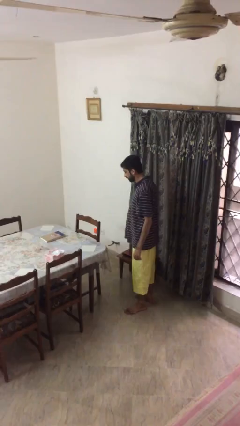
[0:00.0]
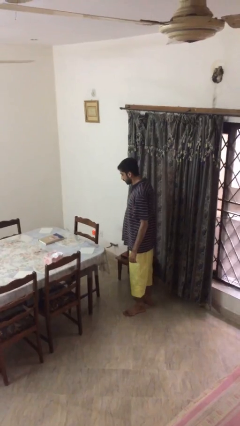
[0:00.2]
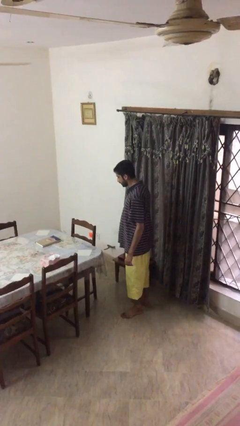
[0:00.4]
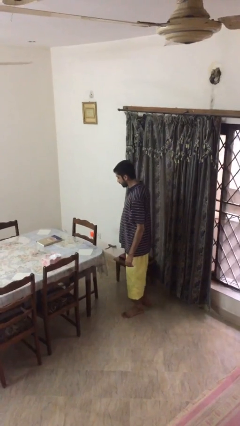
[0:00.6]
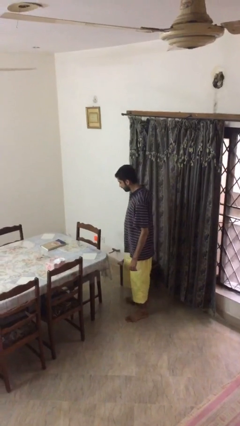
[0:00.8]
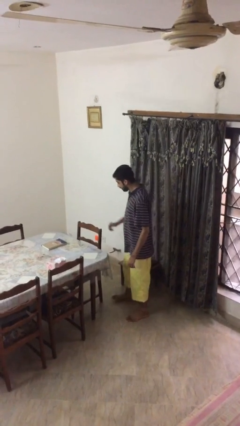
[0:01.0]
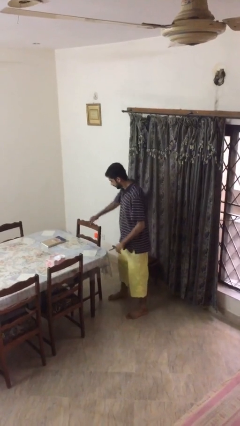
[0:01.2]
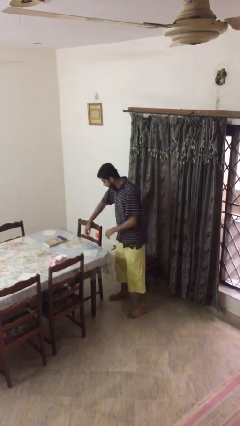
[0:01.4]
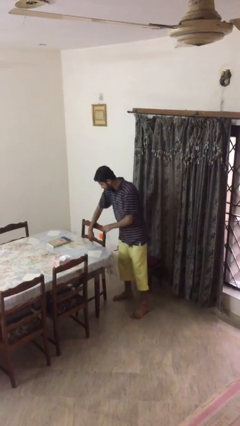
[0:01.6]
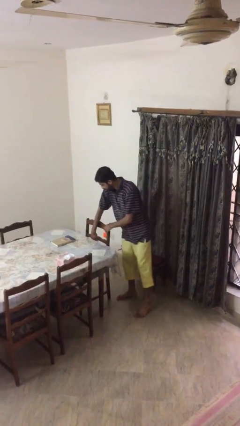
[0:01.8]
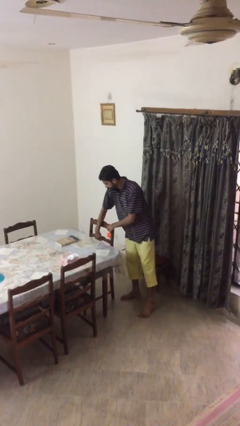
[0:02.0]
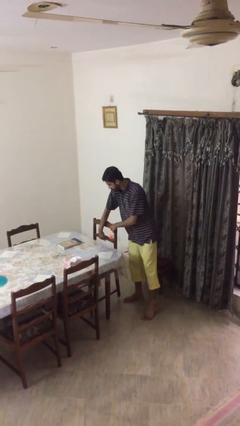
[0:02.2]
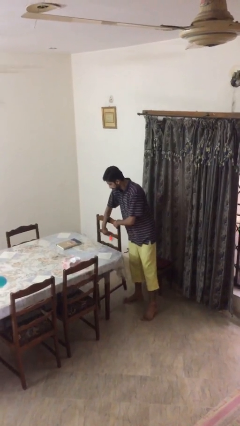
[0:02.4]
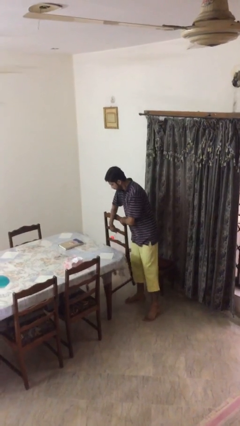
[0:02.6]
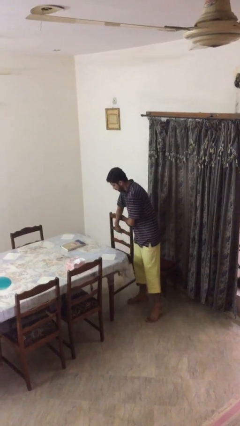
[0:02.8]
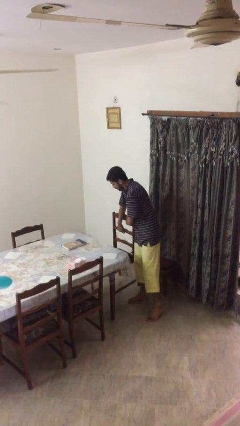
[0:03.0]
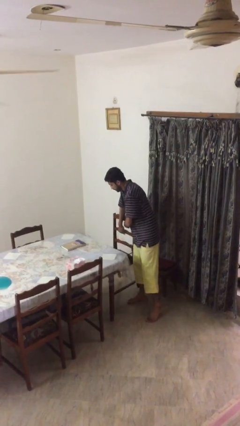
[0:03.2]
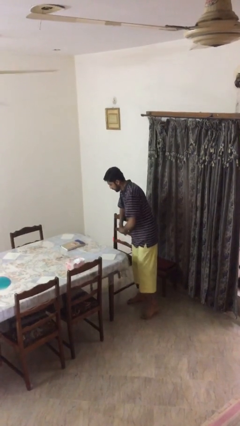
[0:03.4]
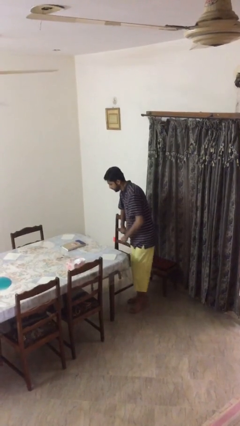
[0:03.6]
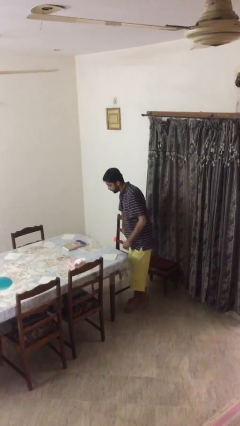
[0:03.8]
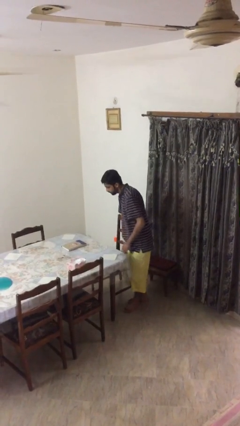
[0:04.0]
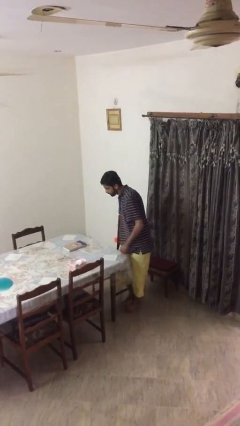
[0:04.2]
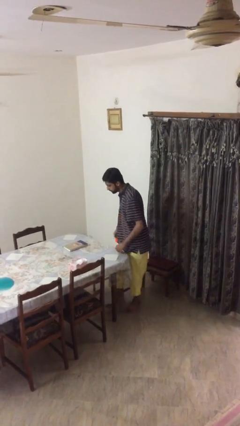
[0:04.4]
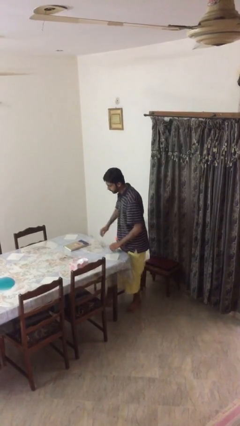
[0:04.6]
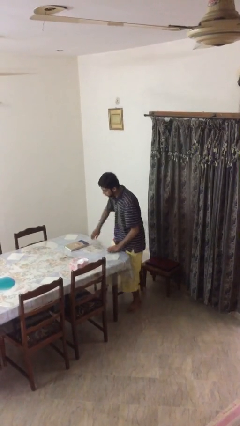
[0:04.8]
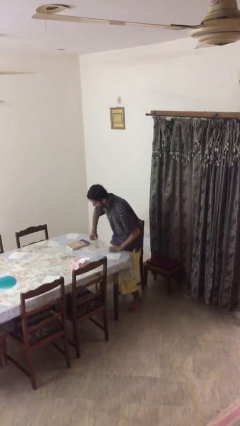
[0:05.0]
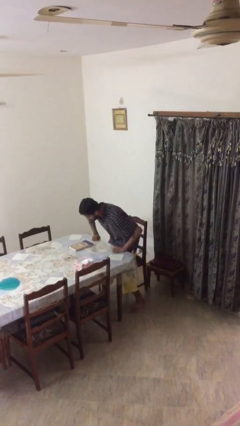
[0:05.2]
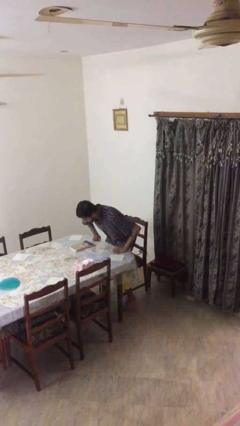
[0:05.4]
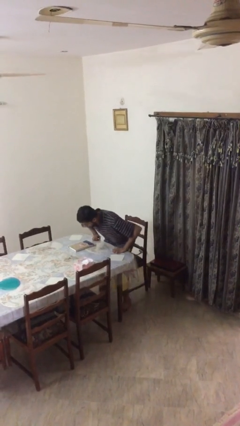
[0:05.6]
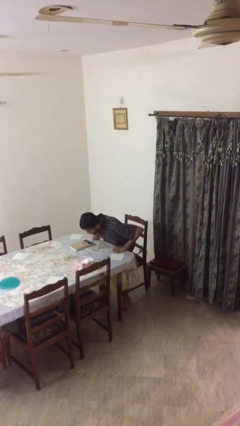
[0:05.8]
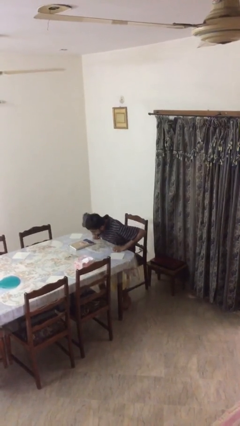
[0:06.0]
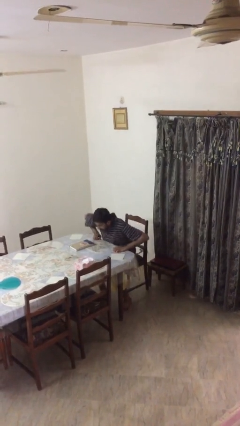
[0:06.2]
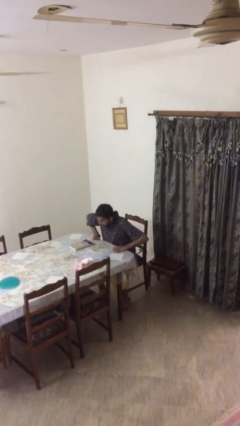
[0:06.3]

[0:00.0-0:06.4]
person sits down

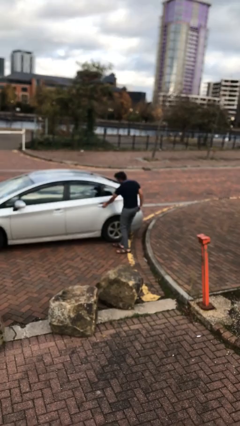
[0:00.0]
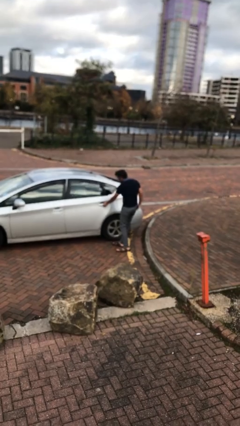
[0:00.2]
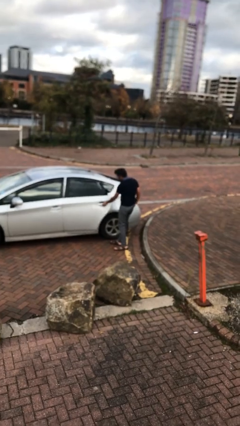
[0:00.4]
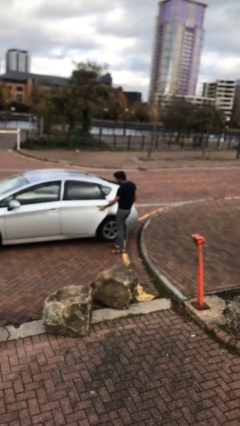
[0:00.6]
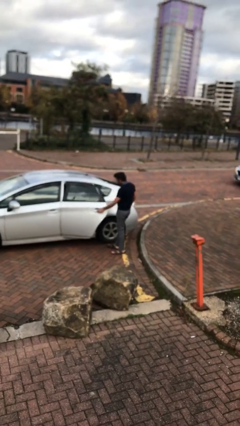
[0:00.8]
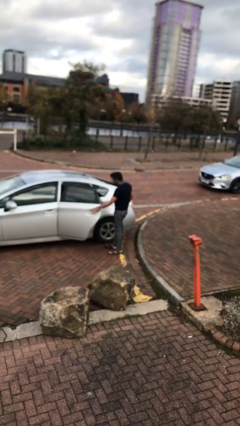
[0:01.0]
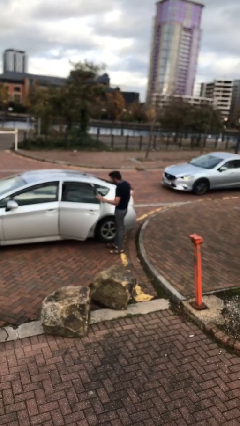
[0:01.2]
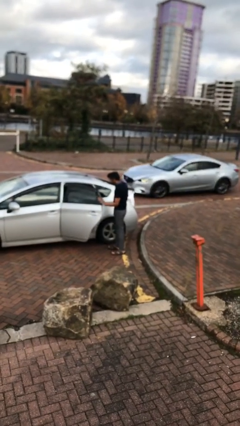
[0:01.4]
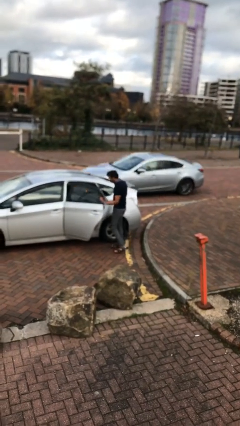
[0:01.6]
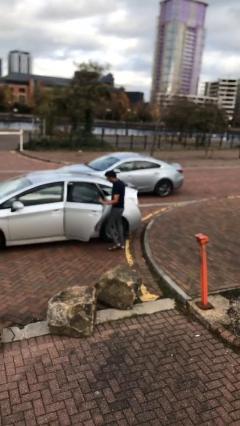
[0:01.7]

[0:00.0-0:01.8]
person opens car door

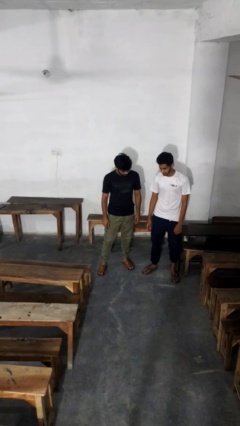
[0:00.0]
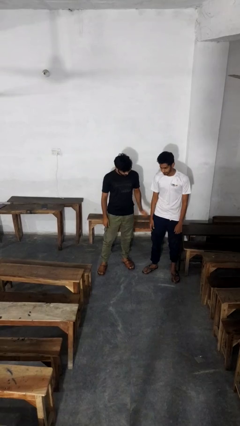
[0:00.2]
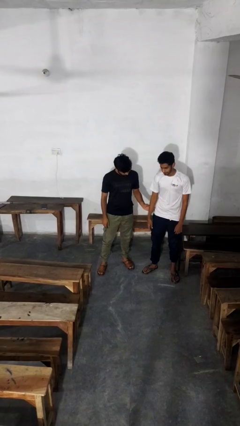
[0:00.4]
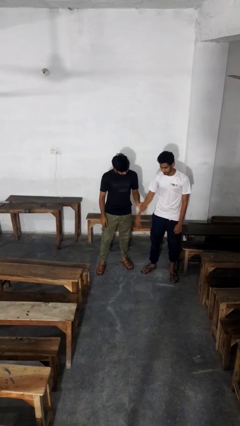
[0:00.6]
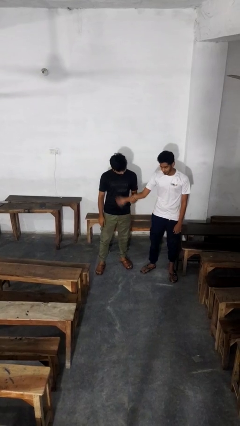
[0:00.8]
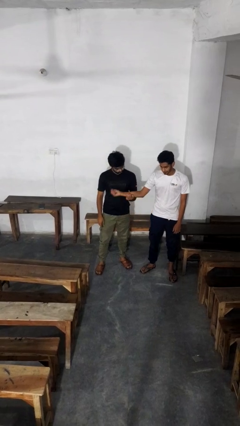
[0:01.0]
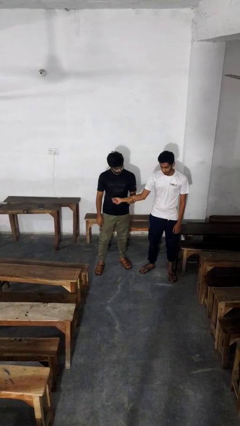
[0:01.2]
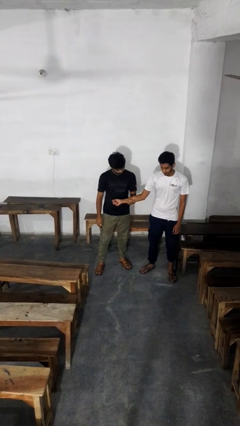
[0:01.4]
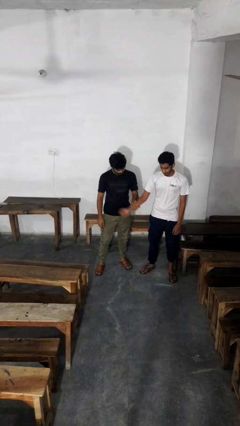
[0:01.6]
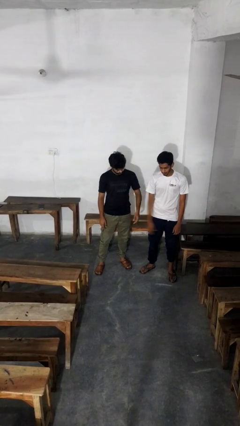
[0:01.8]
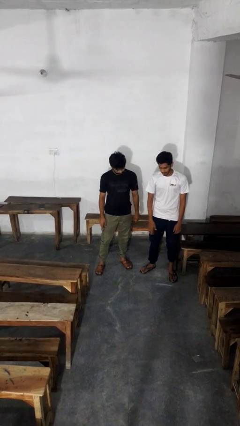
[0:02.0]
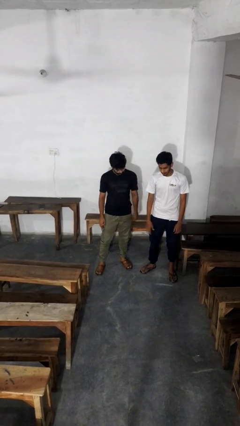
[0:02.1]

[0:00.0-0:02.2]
person grabs person by forearm

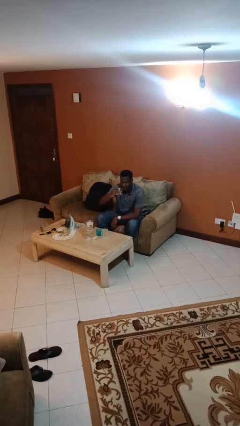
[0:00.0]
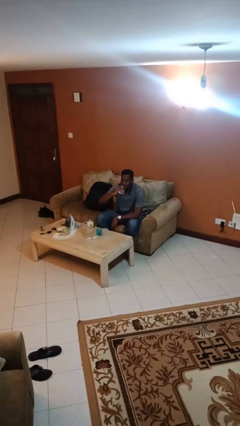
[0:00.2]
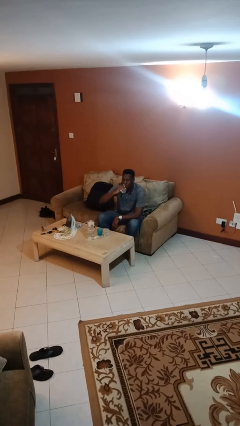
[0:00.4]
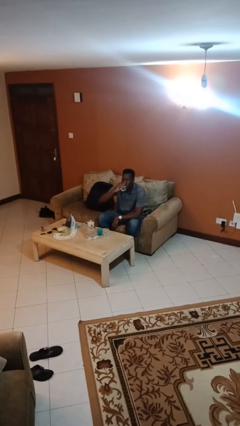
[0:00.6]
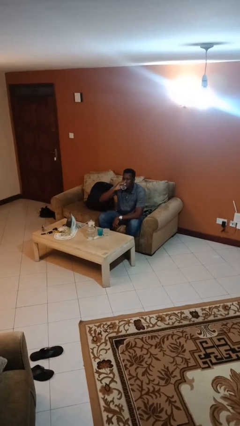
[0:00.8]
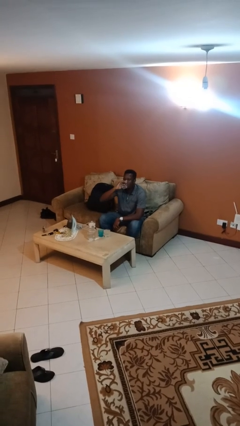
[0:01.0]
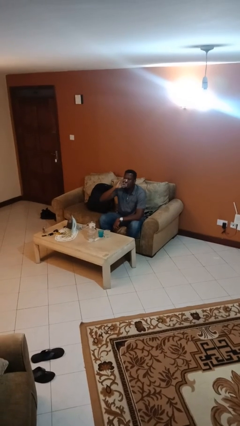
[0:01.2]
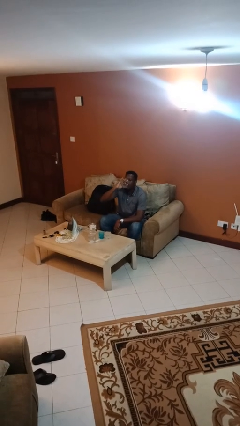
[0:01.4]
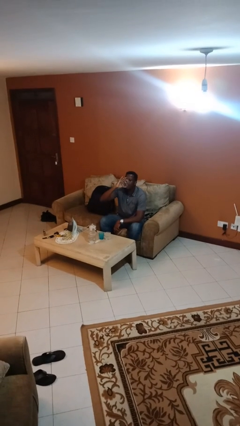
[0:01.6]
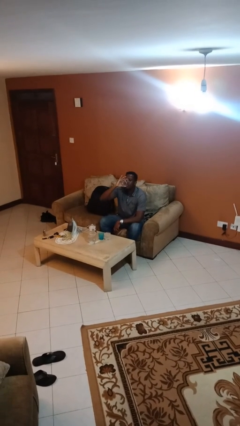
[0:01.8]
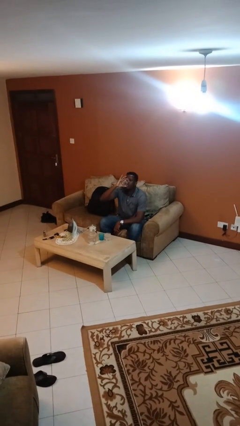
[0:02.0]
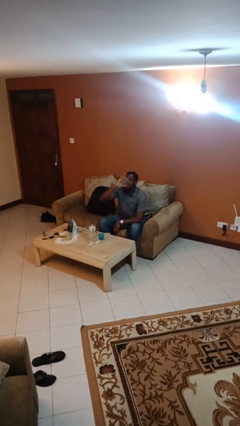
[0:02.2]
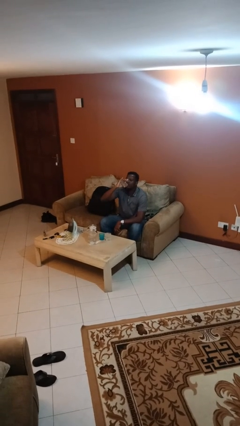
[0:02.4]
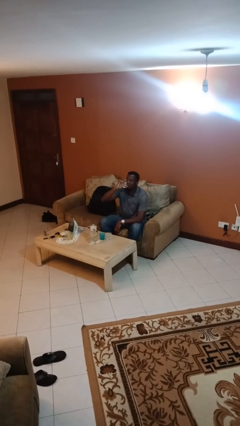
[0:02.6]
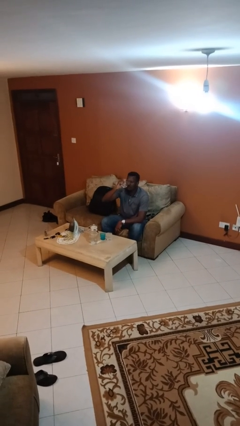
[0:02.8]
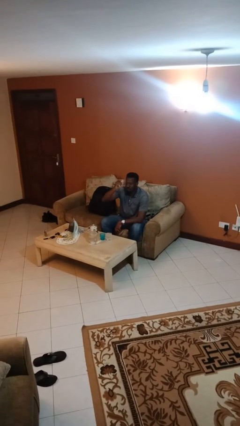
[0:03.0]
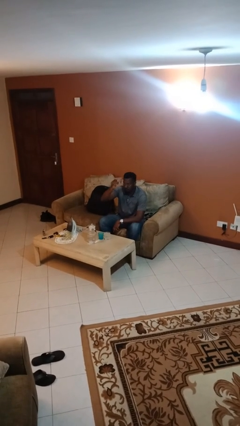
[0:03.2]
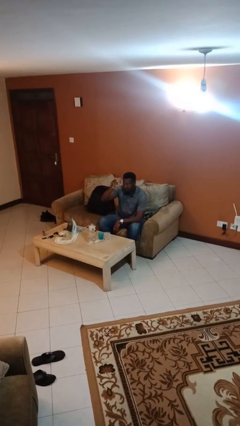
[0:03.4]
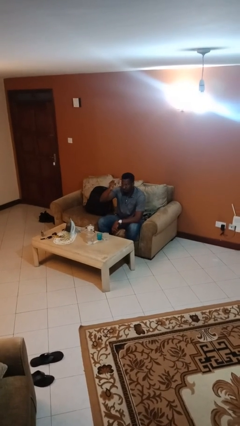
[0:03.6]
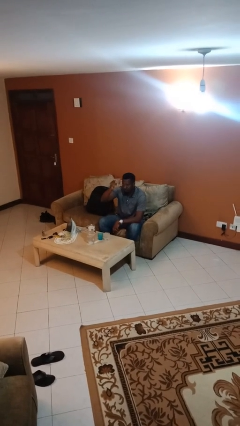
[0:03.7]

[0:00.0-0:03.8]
person drinks from shotglass

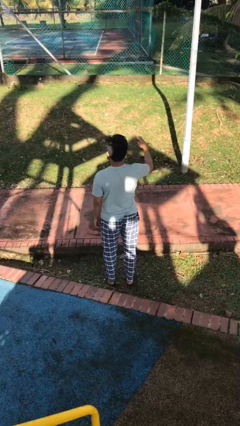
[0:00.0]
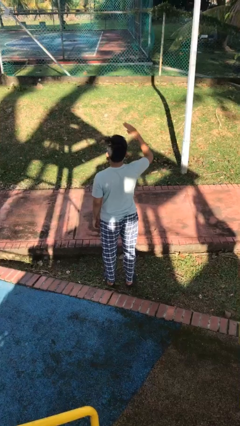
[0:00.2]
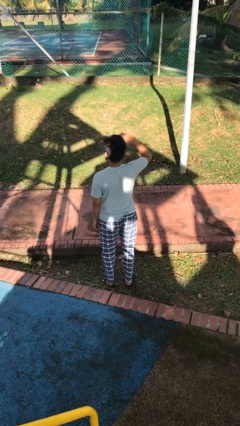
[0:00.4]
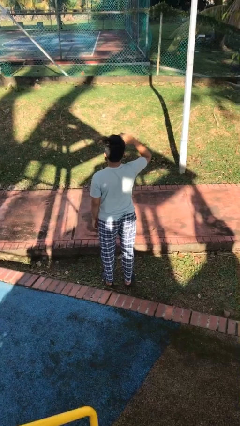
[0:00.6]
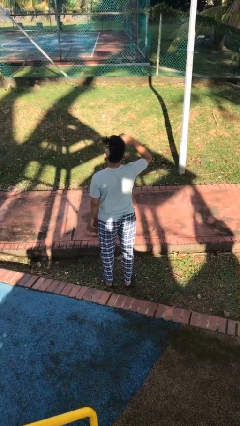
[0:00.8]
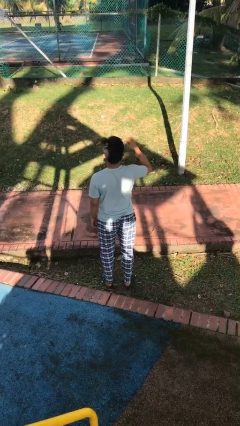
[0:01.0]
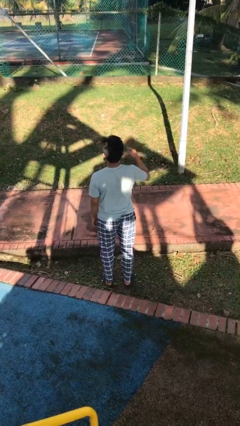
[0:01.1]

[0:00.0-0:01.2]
person salutes

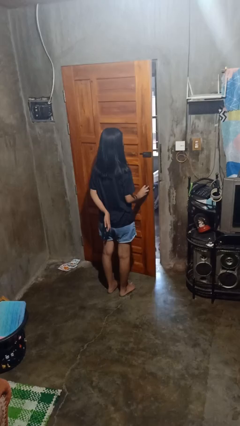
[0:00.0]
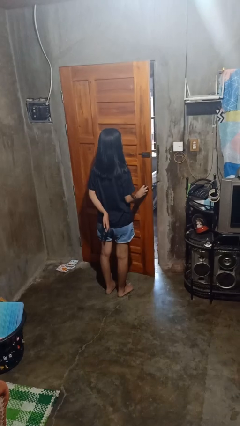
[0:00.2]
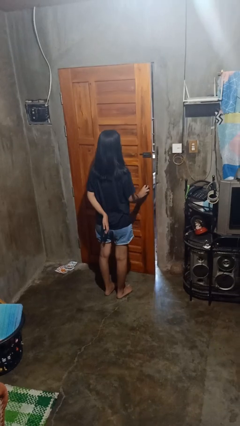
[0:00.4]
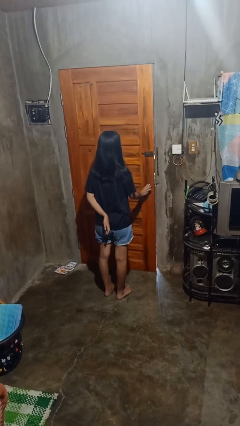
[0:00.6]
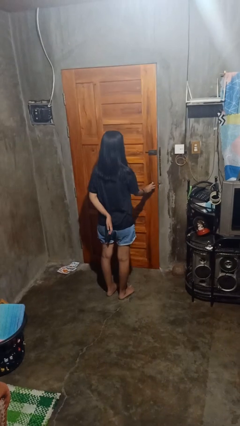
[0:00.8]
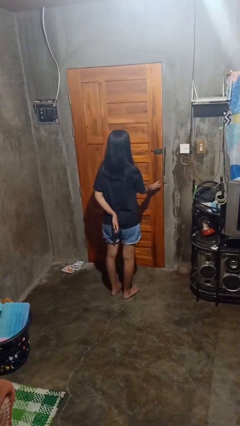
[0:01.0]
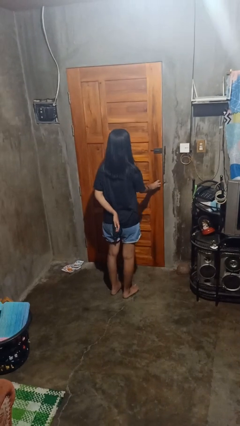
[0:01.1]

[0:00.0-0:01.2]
person closes facility door

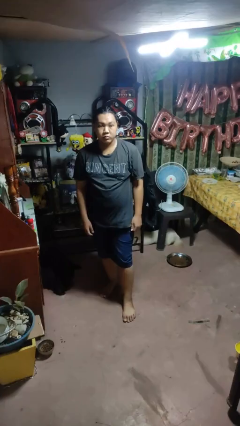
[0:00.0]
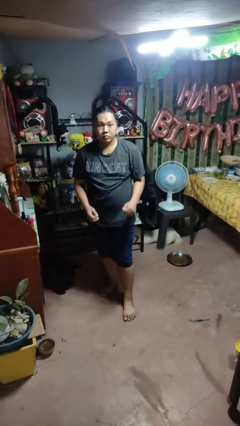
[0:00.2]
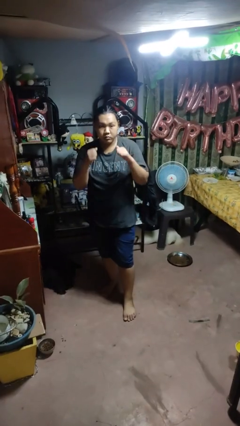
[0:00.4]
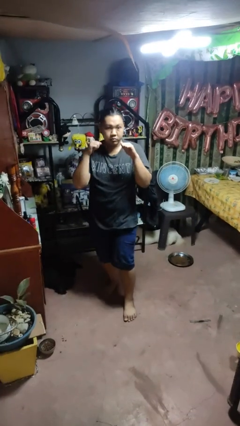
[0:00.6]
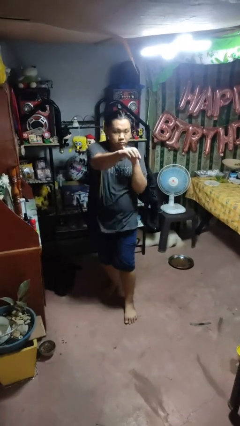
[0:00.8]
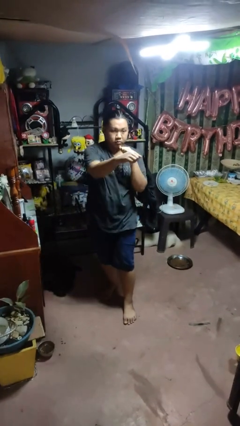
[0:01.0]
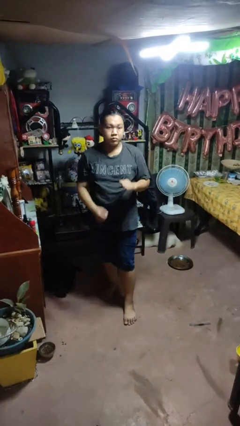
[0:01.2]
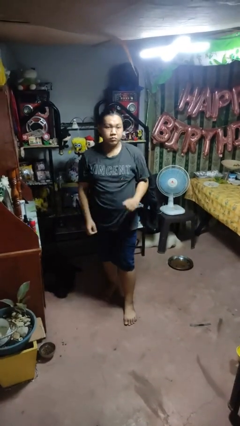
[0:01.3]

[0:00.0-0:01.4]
person punches
